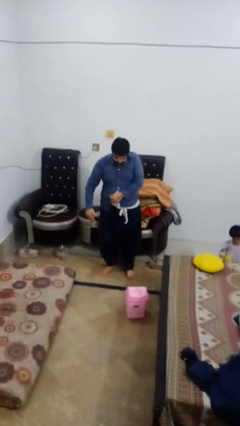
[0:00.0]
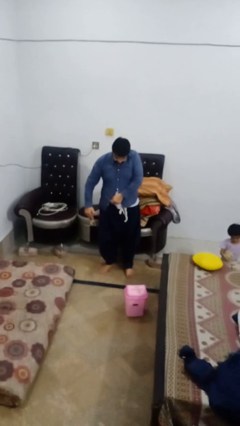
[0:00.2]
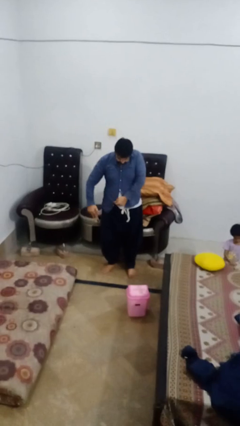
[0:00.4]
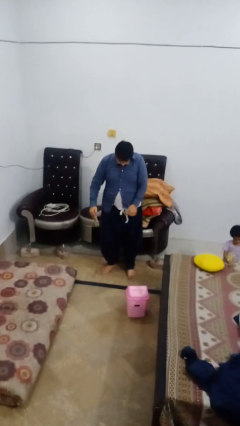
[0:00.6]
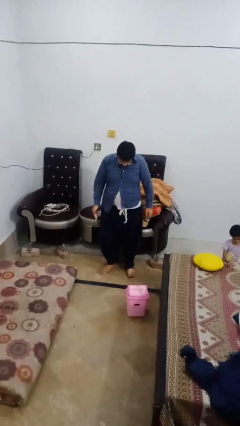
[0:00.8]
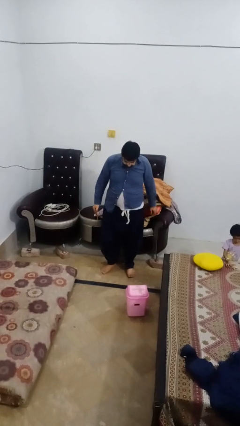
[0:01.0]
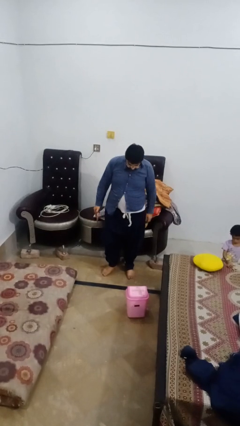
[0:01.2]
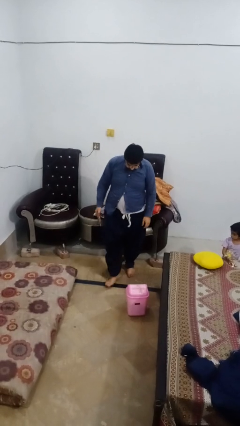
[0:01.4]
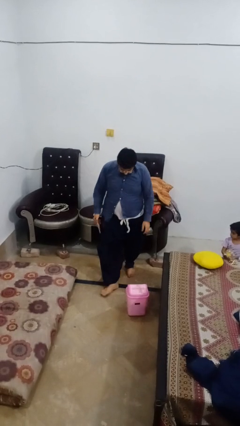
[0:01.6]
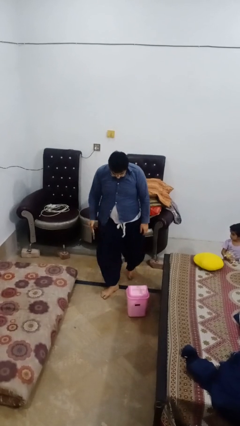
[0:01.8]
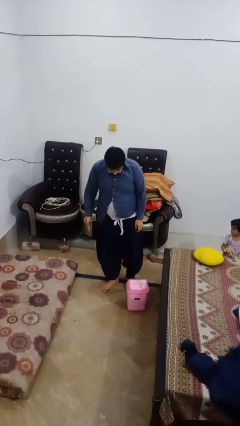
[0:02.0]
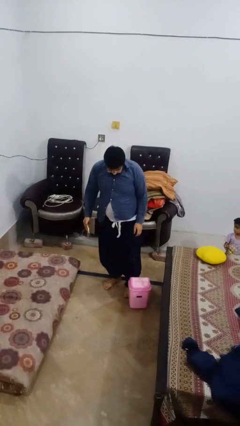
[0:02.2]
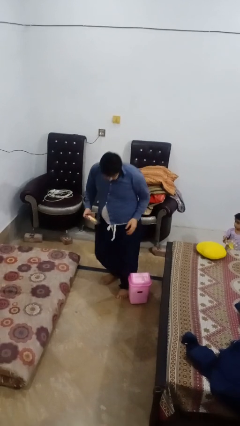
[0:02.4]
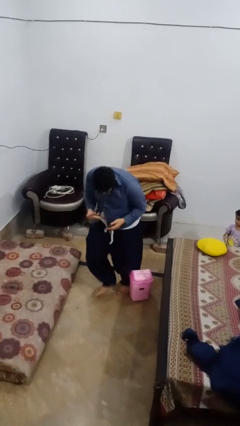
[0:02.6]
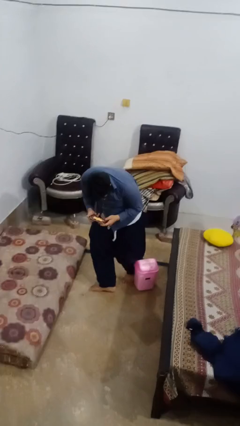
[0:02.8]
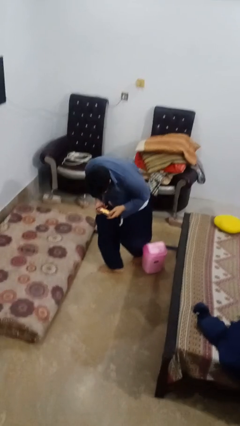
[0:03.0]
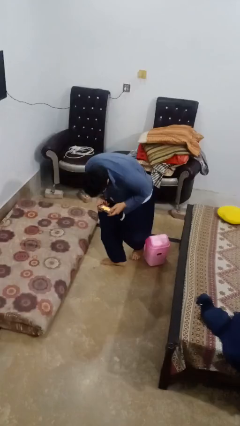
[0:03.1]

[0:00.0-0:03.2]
person trips on object on floor

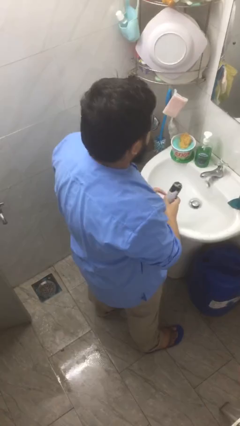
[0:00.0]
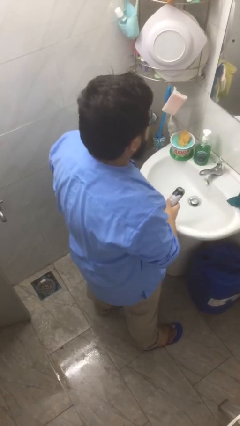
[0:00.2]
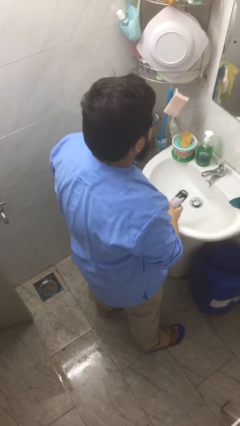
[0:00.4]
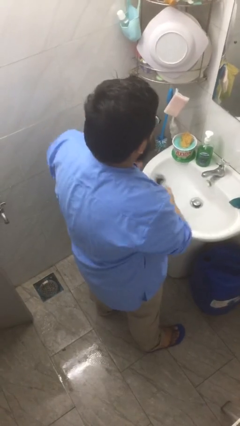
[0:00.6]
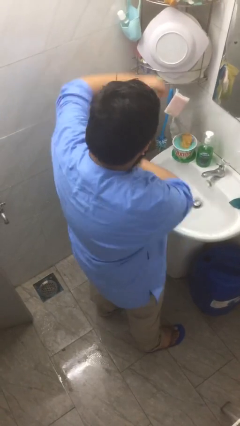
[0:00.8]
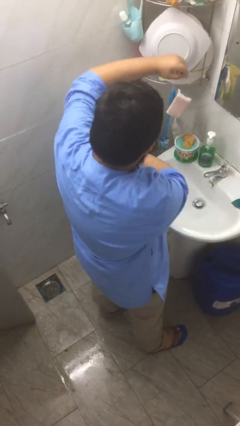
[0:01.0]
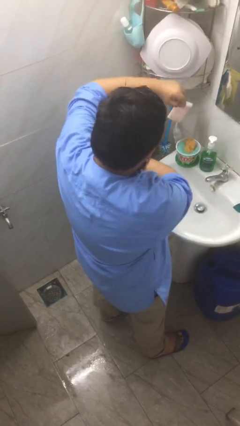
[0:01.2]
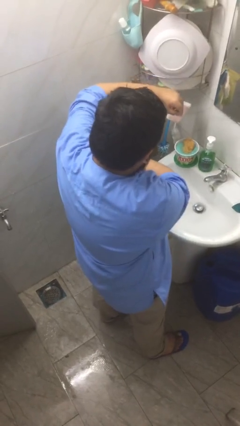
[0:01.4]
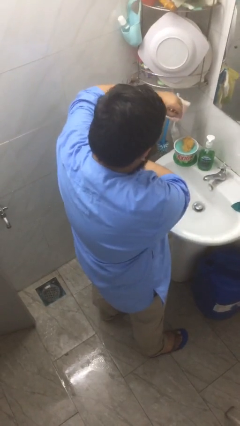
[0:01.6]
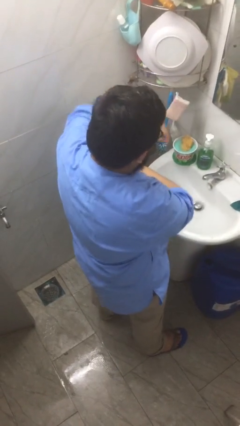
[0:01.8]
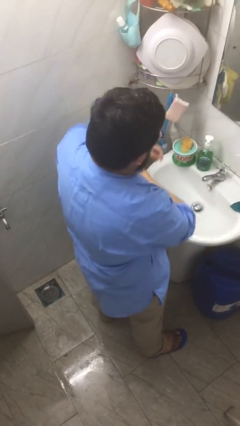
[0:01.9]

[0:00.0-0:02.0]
person applies deodorant

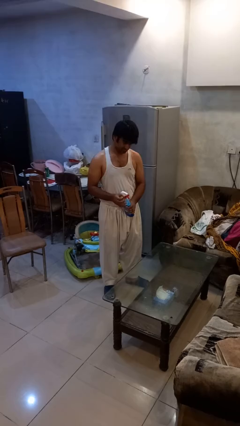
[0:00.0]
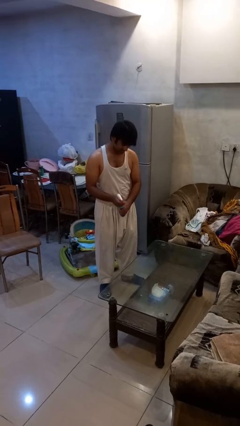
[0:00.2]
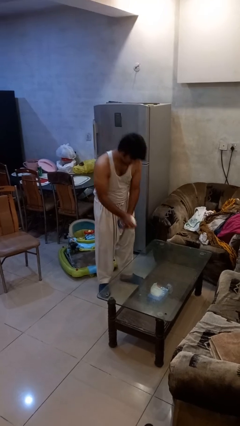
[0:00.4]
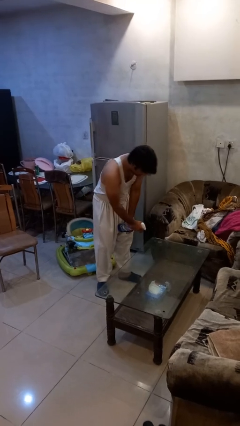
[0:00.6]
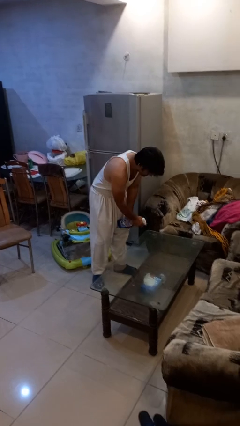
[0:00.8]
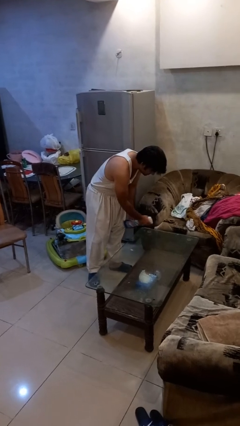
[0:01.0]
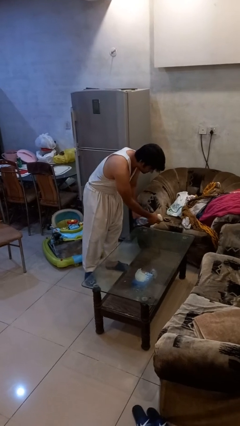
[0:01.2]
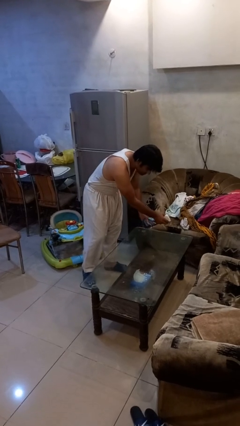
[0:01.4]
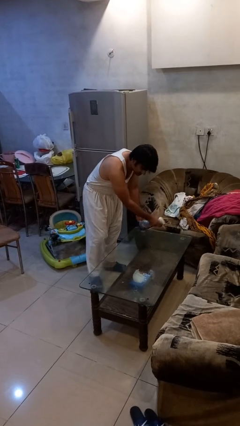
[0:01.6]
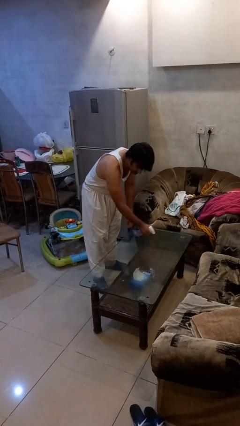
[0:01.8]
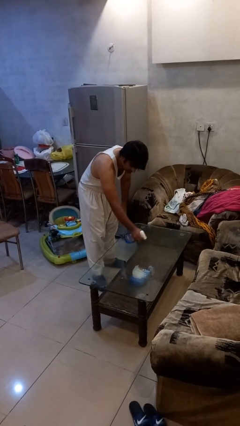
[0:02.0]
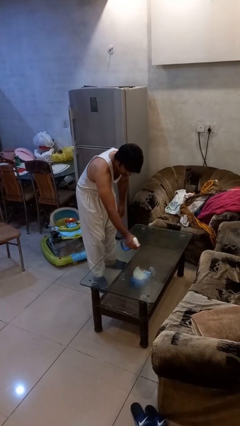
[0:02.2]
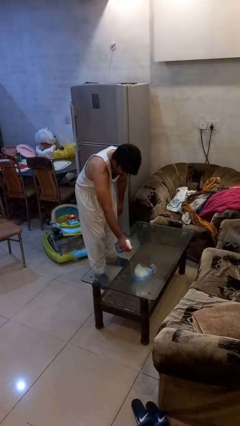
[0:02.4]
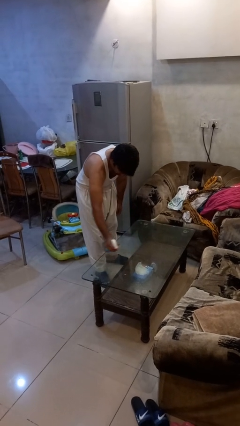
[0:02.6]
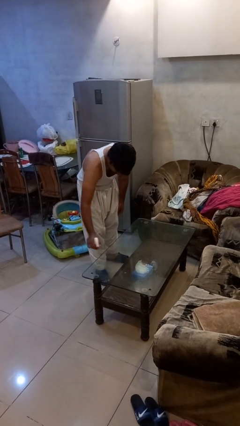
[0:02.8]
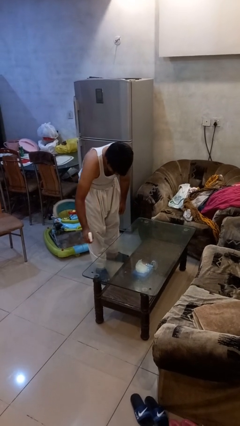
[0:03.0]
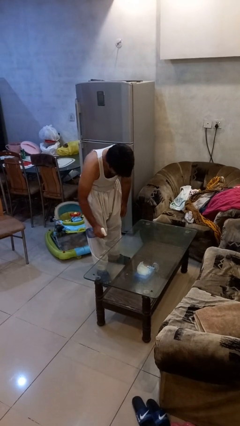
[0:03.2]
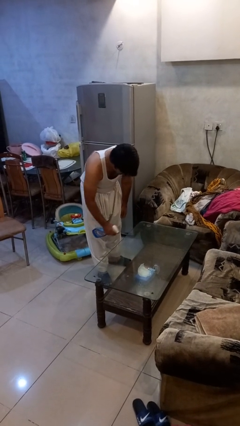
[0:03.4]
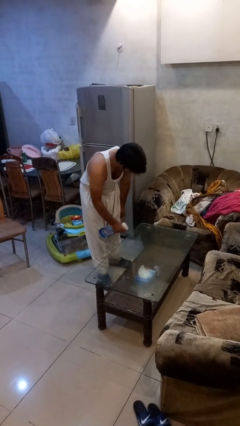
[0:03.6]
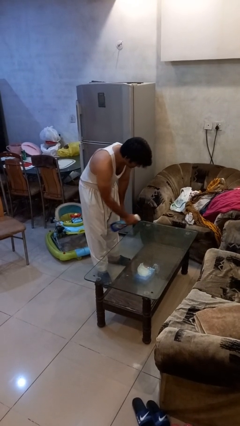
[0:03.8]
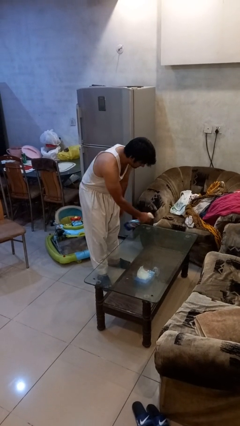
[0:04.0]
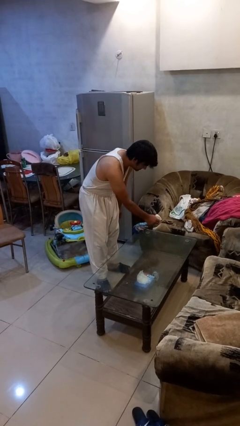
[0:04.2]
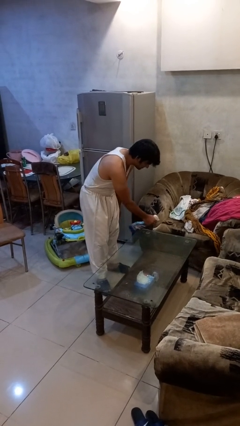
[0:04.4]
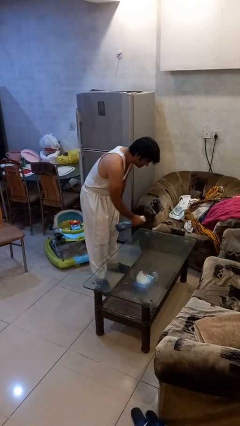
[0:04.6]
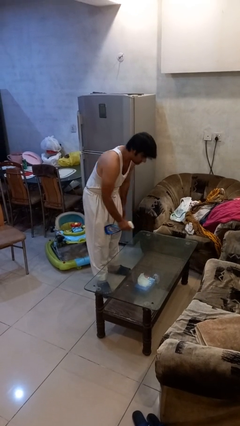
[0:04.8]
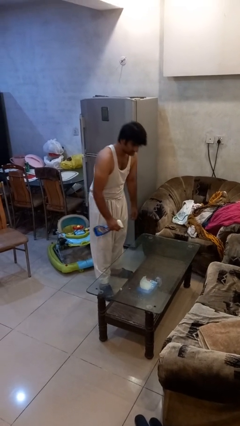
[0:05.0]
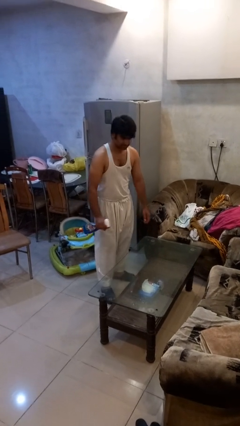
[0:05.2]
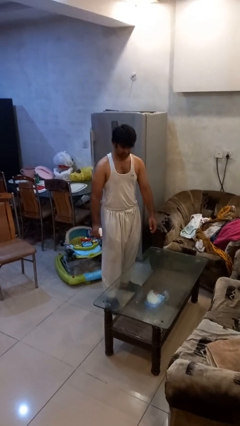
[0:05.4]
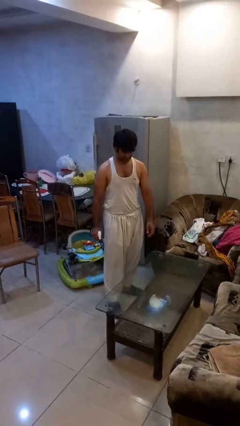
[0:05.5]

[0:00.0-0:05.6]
person sprays from bottle

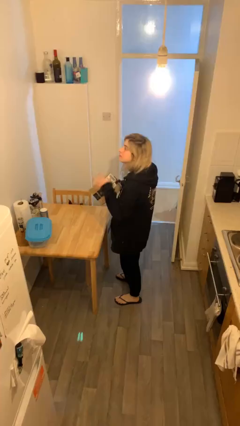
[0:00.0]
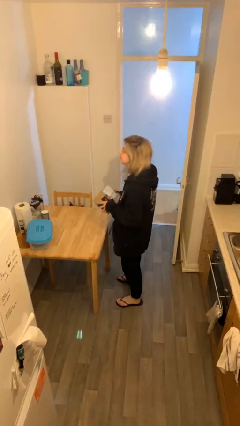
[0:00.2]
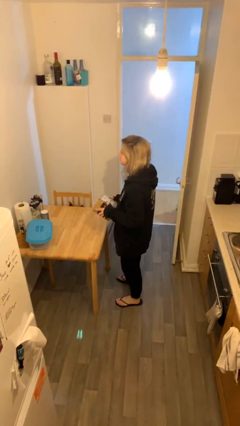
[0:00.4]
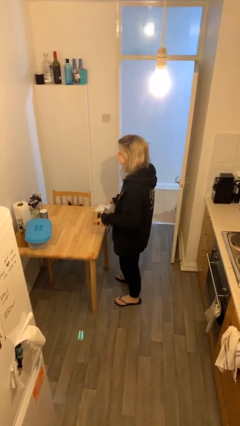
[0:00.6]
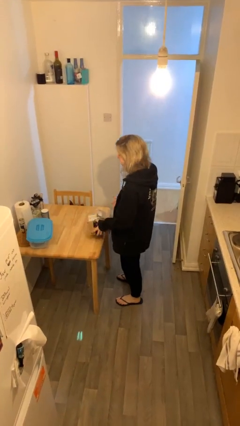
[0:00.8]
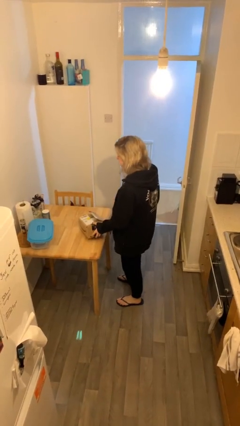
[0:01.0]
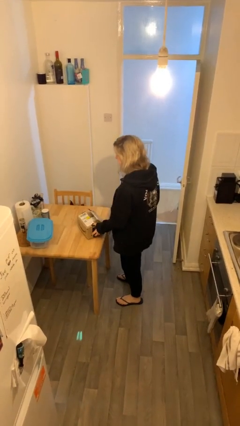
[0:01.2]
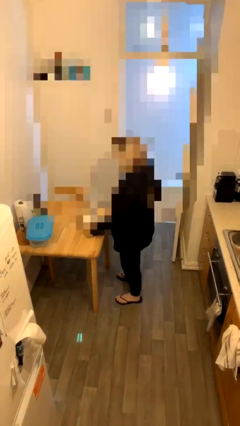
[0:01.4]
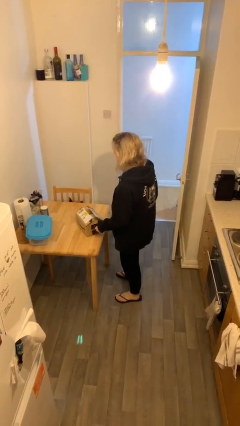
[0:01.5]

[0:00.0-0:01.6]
person puts down object on table

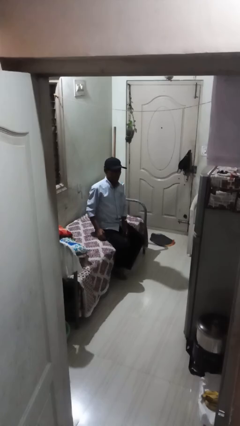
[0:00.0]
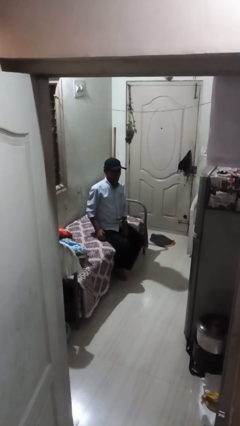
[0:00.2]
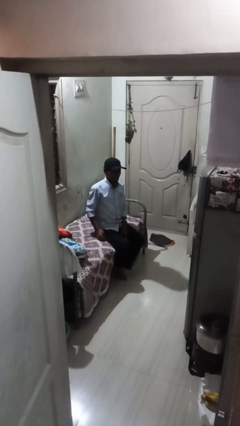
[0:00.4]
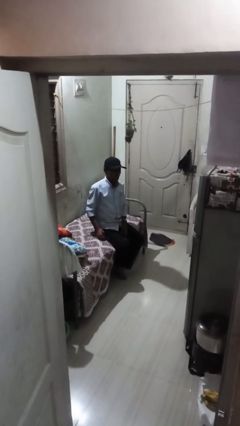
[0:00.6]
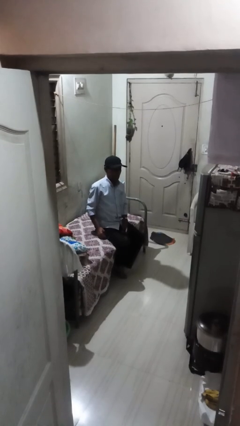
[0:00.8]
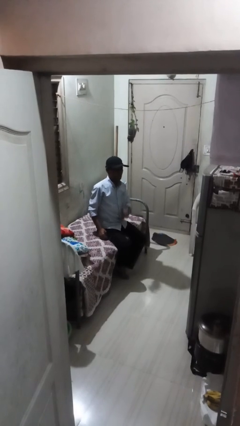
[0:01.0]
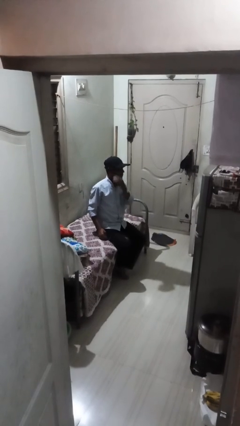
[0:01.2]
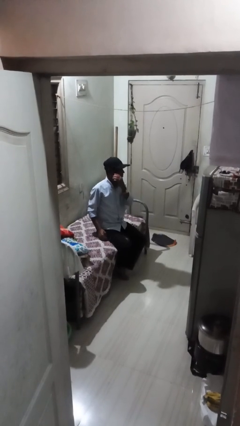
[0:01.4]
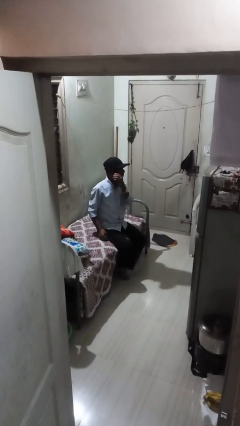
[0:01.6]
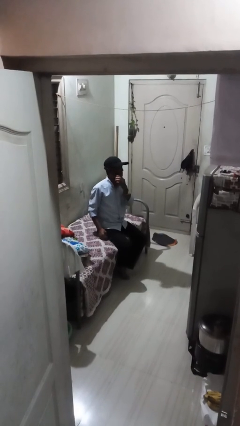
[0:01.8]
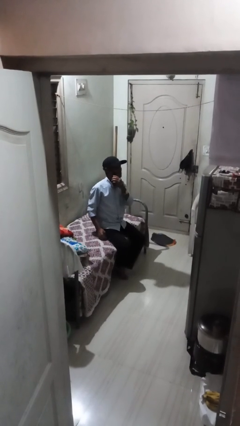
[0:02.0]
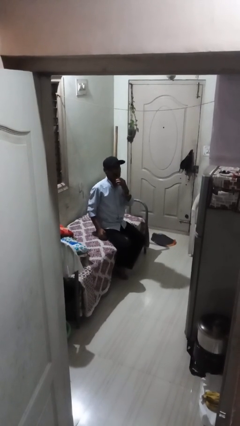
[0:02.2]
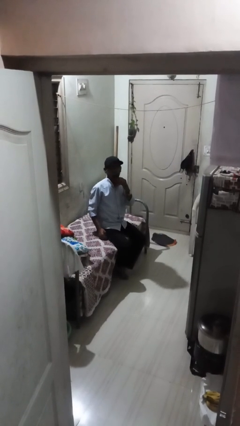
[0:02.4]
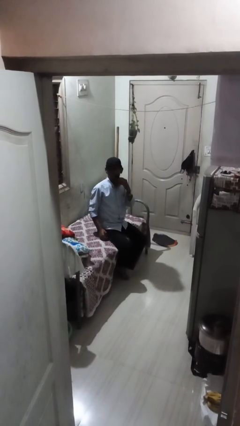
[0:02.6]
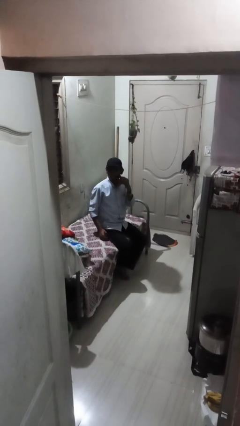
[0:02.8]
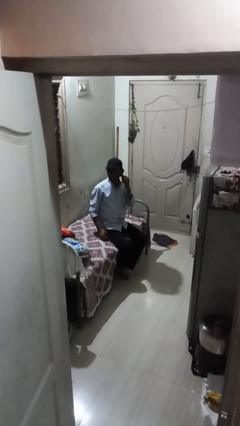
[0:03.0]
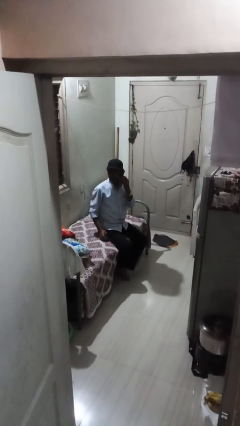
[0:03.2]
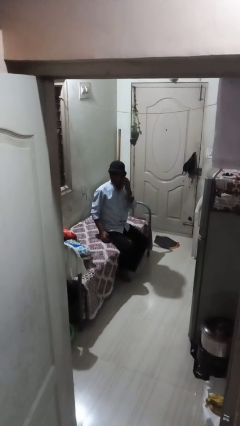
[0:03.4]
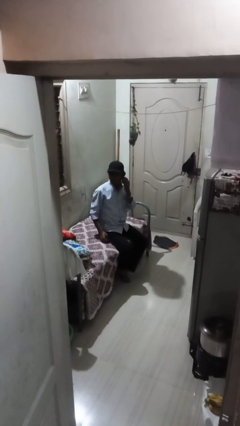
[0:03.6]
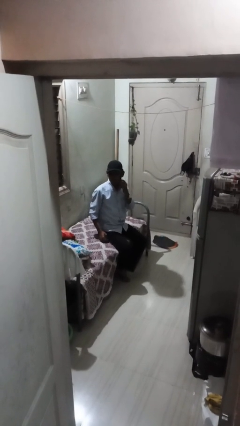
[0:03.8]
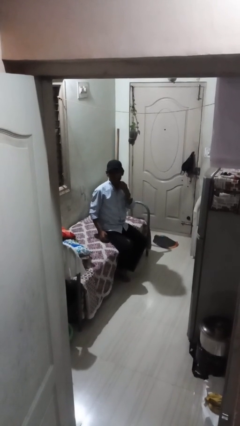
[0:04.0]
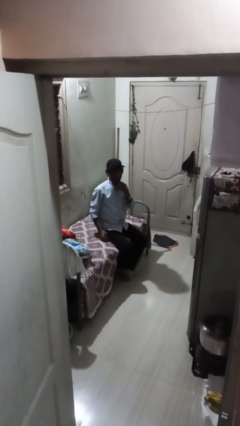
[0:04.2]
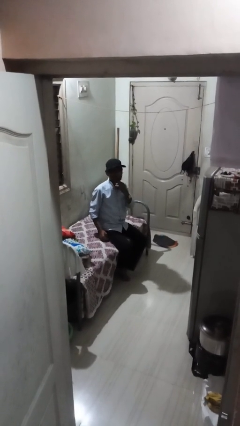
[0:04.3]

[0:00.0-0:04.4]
person applies shaving cream

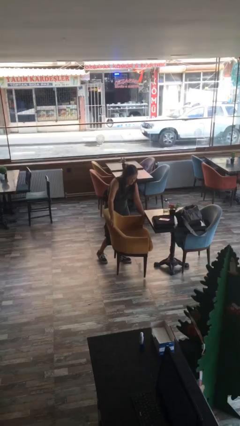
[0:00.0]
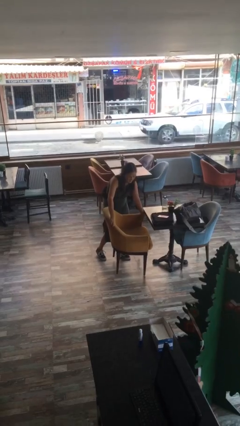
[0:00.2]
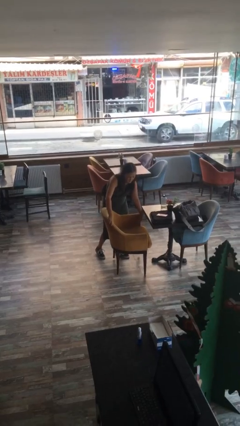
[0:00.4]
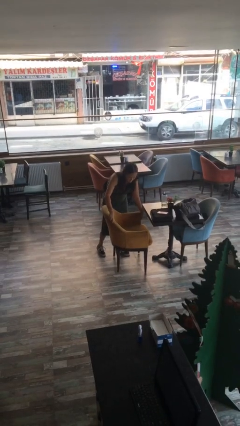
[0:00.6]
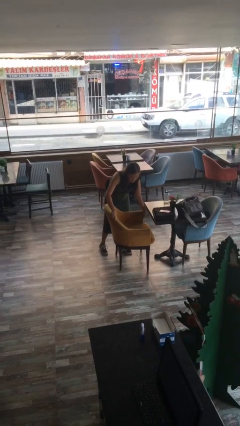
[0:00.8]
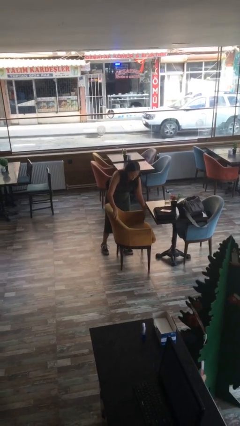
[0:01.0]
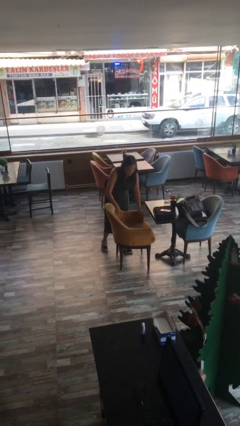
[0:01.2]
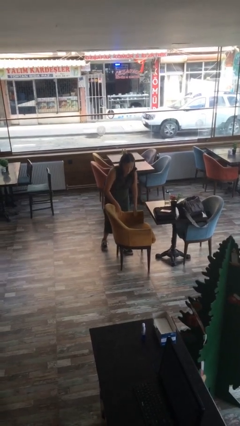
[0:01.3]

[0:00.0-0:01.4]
person puts down object on floor
